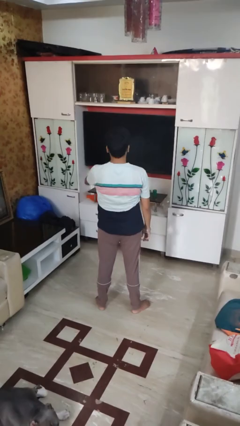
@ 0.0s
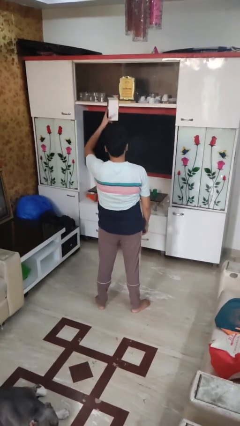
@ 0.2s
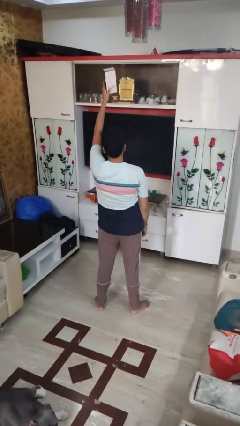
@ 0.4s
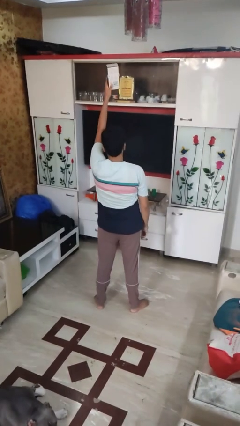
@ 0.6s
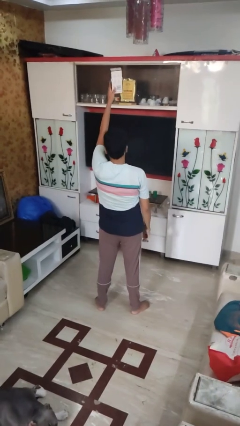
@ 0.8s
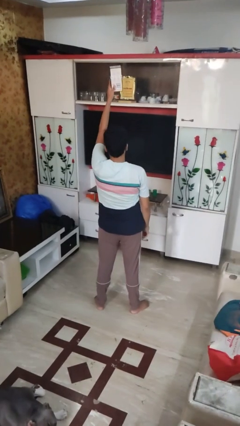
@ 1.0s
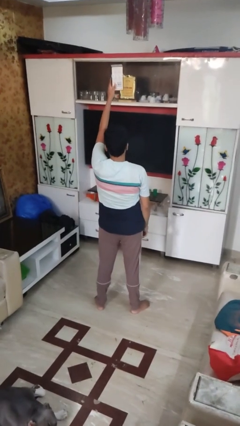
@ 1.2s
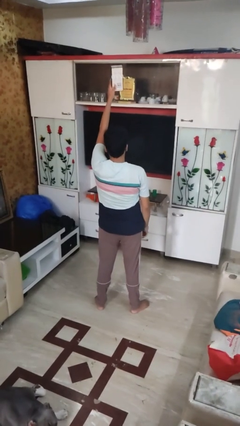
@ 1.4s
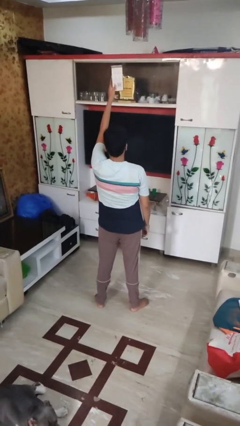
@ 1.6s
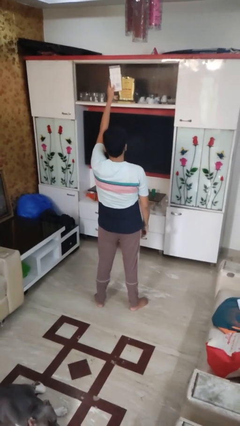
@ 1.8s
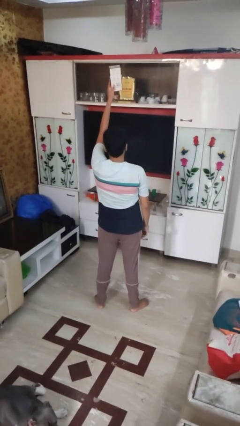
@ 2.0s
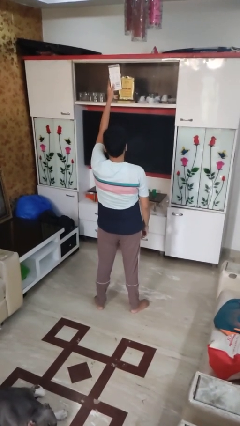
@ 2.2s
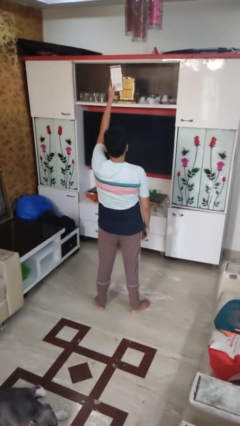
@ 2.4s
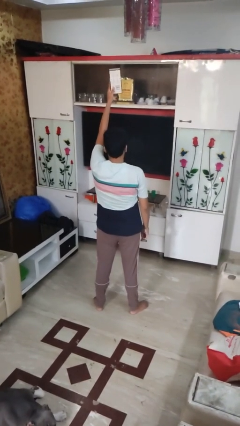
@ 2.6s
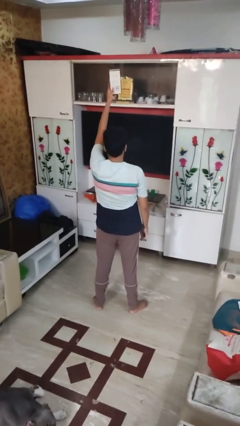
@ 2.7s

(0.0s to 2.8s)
person holds object above head

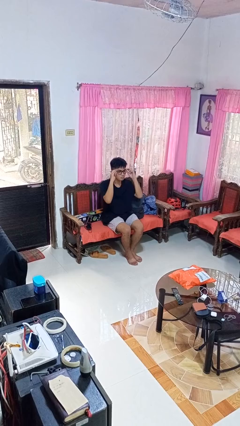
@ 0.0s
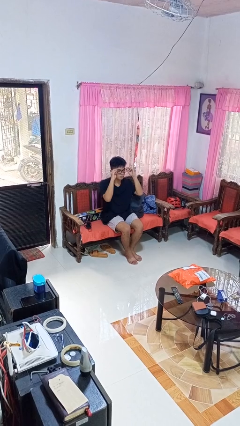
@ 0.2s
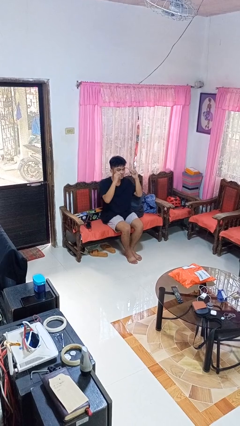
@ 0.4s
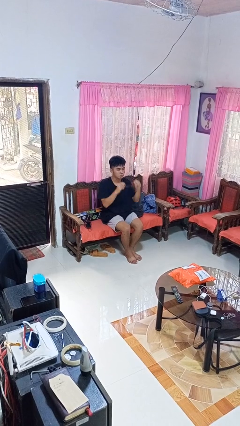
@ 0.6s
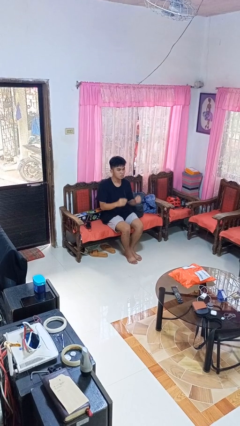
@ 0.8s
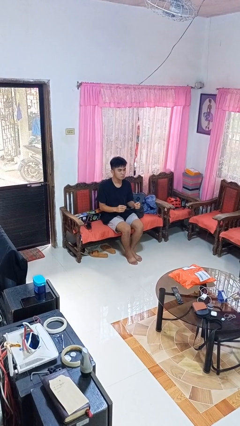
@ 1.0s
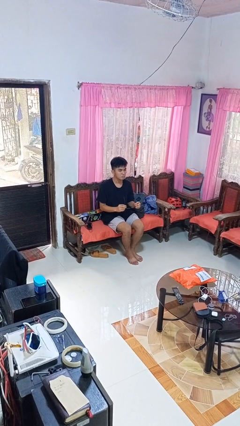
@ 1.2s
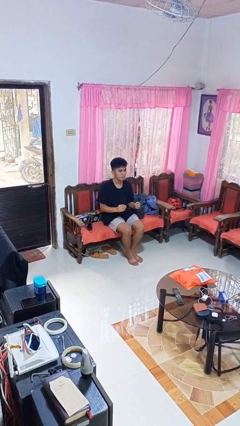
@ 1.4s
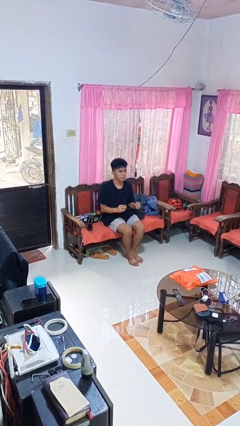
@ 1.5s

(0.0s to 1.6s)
person takes off glasses

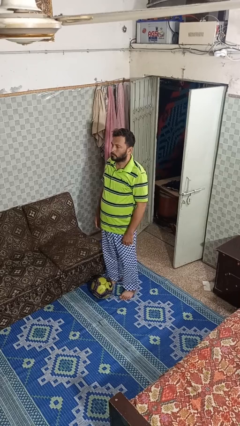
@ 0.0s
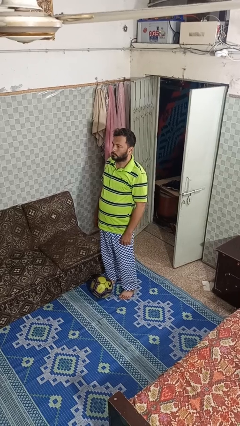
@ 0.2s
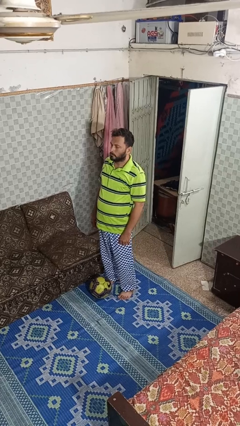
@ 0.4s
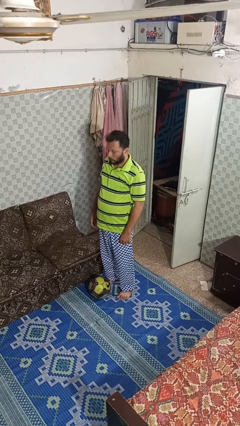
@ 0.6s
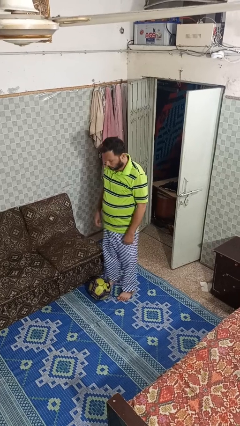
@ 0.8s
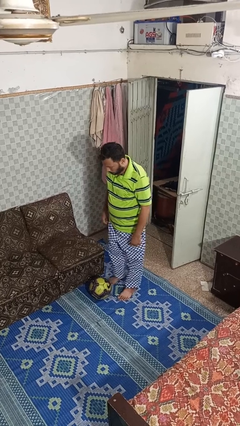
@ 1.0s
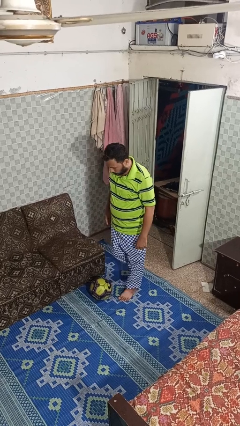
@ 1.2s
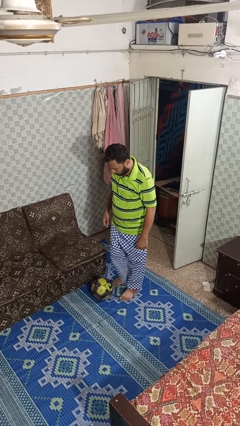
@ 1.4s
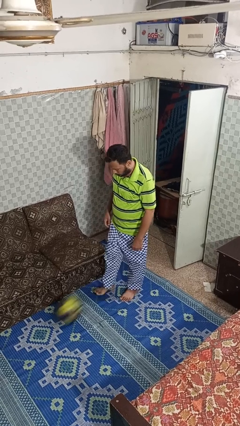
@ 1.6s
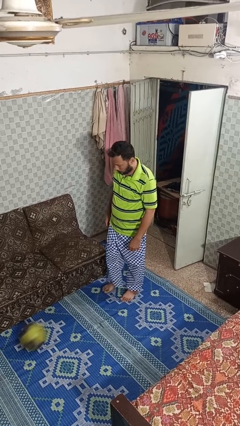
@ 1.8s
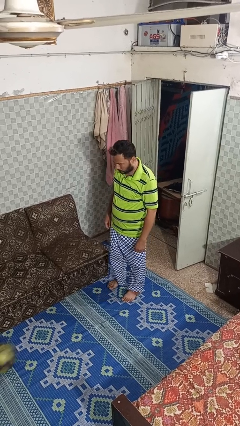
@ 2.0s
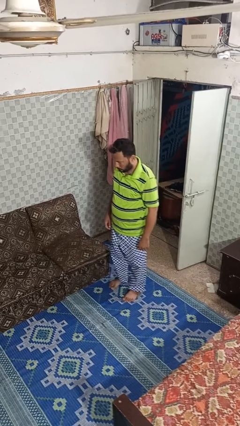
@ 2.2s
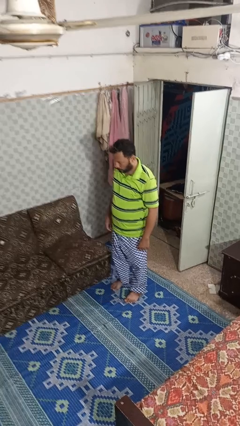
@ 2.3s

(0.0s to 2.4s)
person kicks object to person

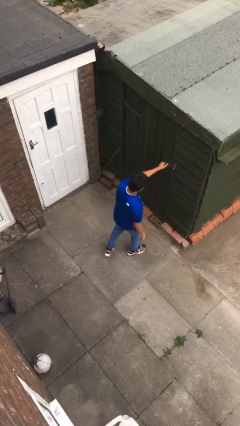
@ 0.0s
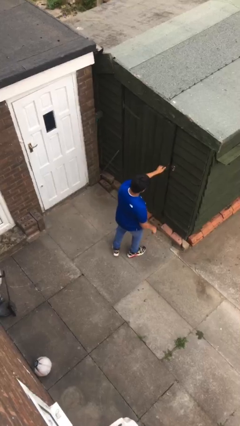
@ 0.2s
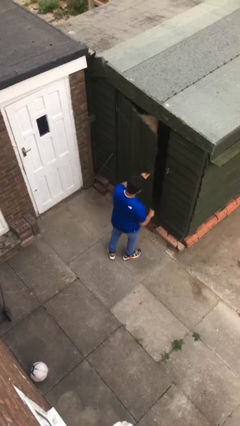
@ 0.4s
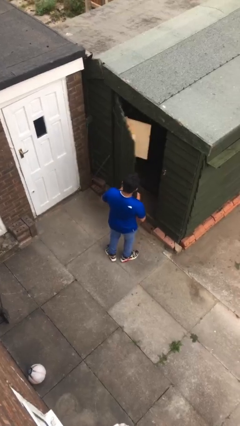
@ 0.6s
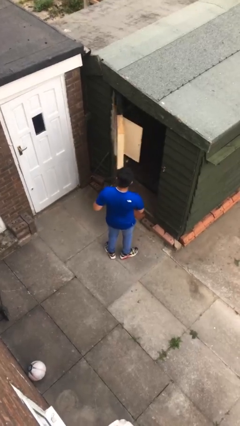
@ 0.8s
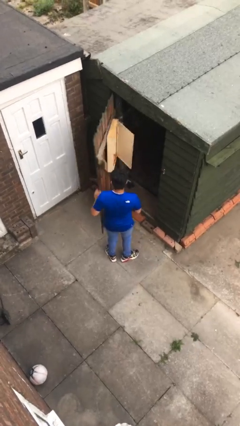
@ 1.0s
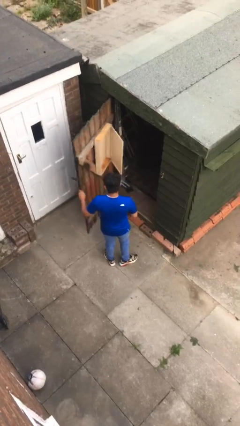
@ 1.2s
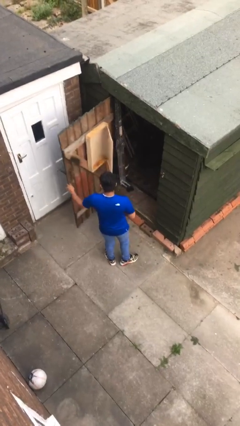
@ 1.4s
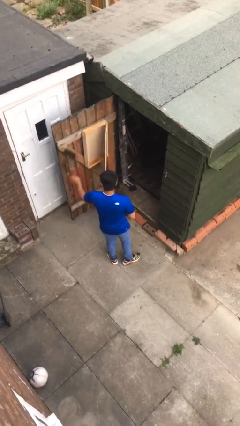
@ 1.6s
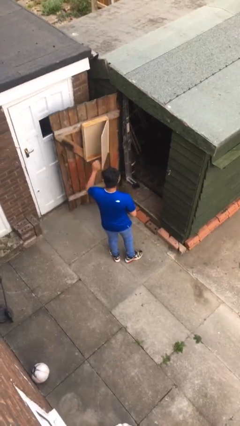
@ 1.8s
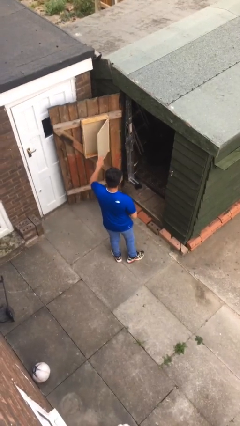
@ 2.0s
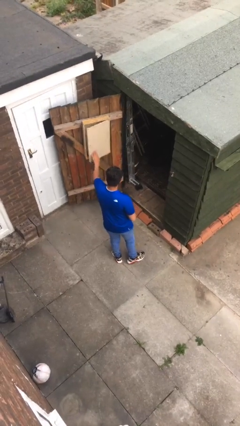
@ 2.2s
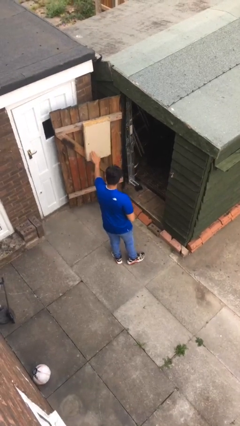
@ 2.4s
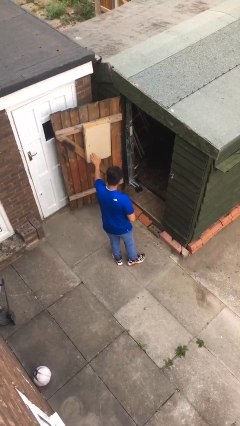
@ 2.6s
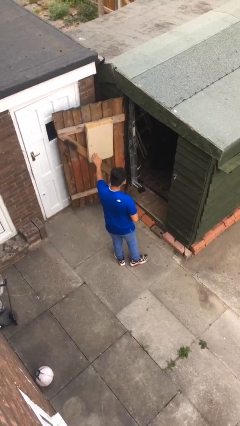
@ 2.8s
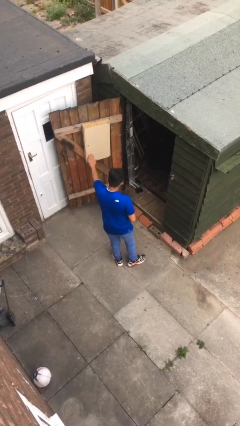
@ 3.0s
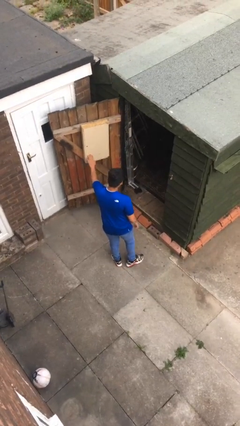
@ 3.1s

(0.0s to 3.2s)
person opens facility door

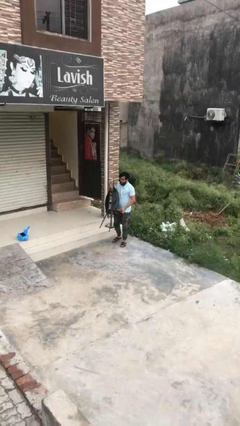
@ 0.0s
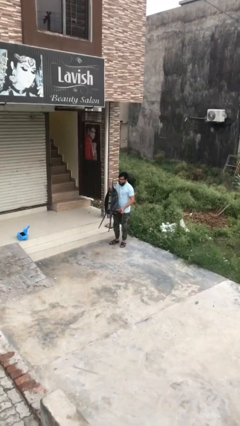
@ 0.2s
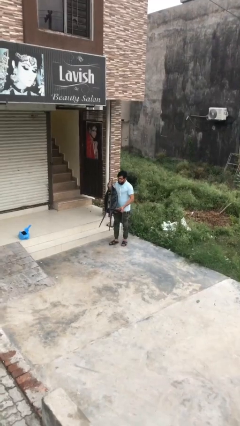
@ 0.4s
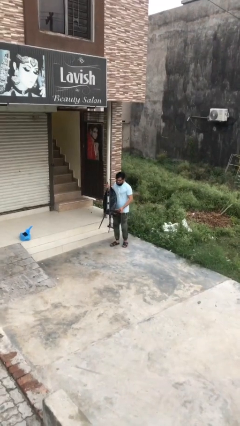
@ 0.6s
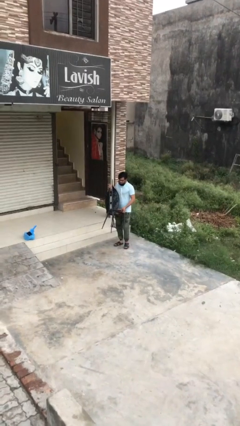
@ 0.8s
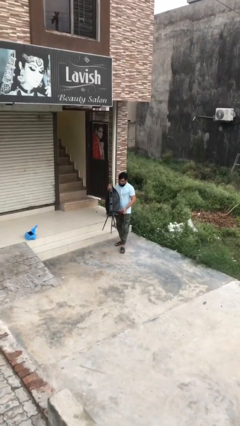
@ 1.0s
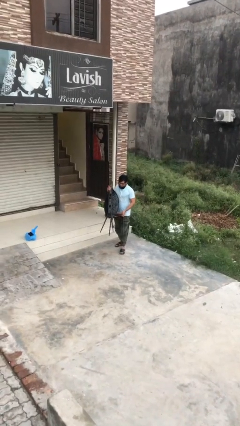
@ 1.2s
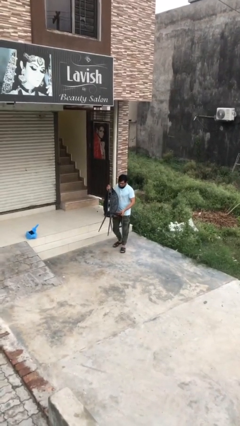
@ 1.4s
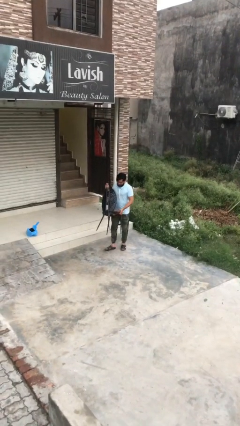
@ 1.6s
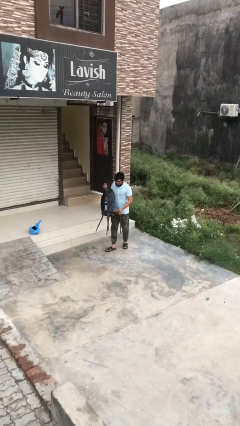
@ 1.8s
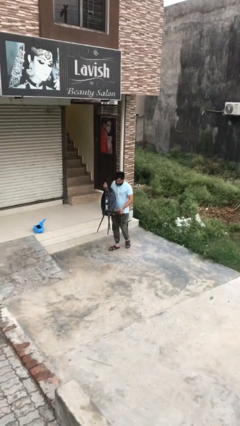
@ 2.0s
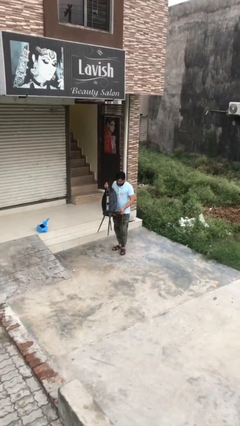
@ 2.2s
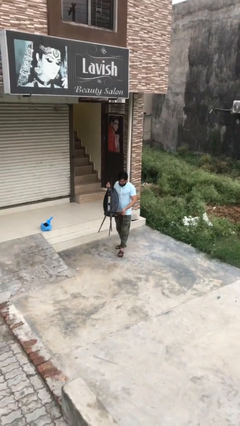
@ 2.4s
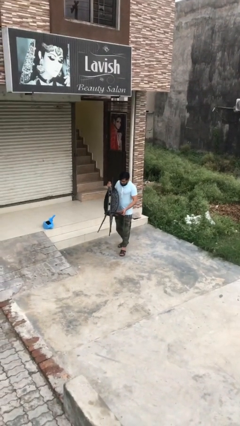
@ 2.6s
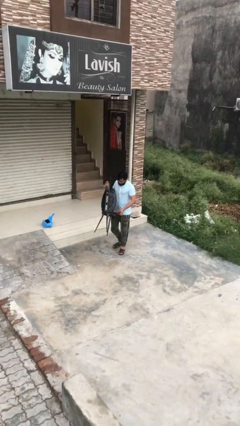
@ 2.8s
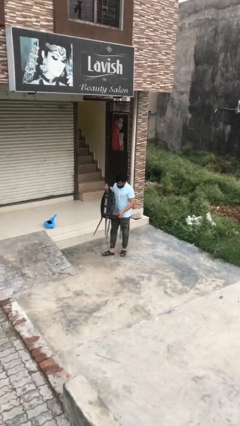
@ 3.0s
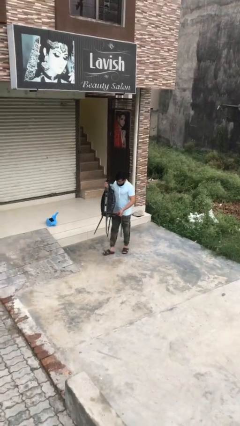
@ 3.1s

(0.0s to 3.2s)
person carries heavy object

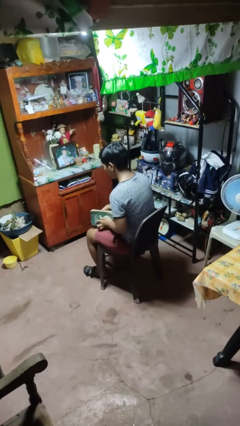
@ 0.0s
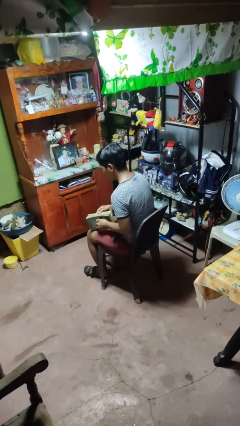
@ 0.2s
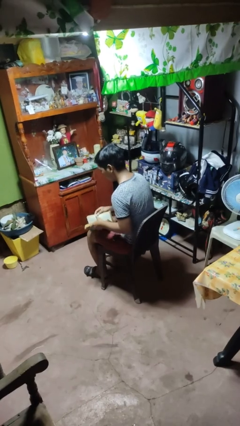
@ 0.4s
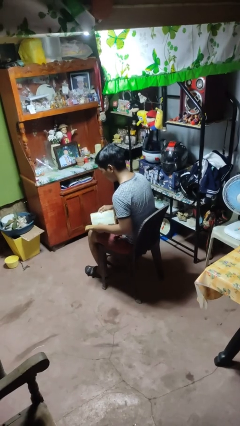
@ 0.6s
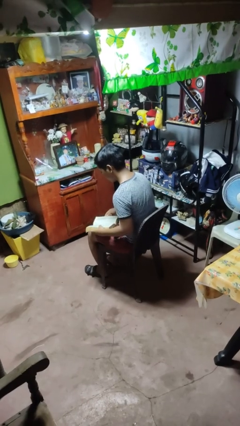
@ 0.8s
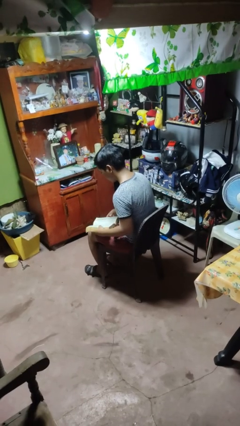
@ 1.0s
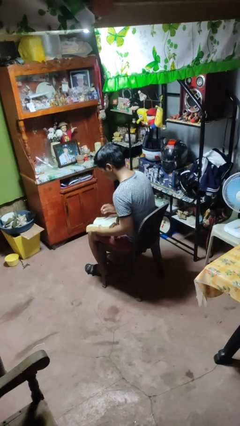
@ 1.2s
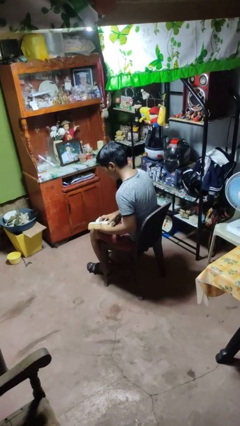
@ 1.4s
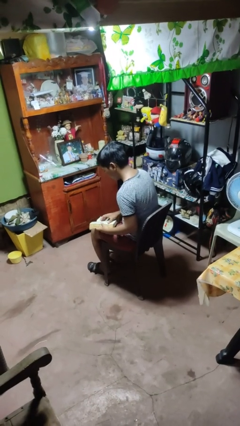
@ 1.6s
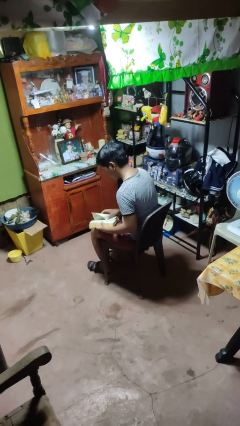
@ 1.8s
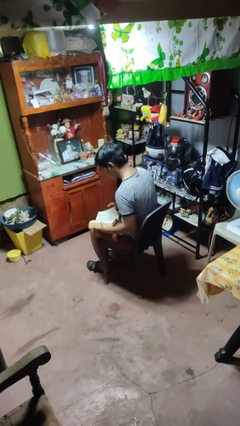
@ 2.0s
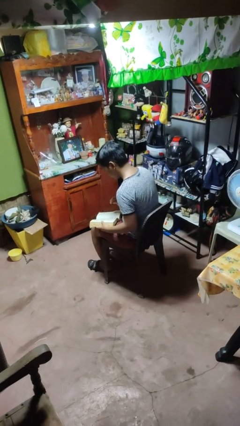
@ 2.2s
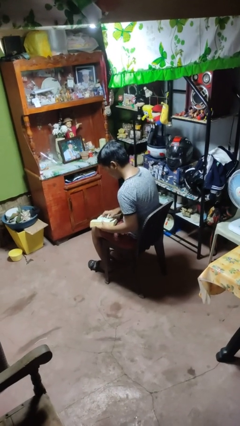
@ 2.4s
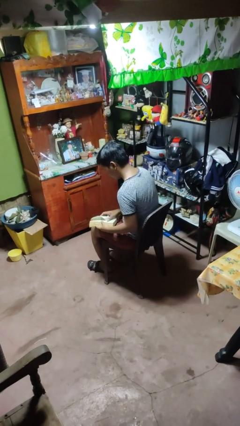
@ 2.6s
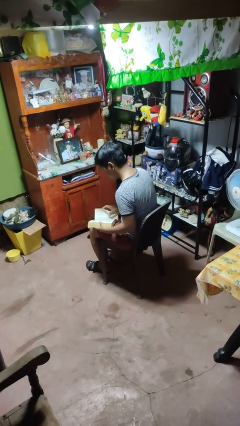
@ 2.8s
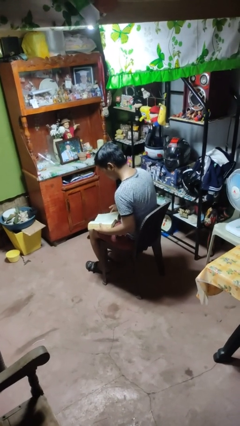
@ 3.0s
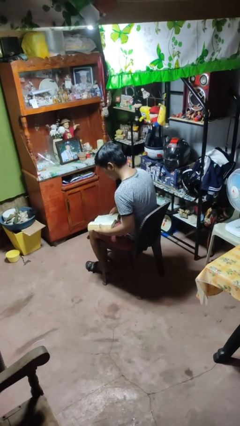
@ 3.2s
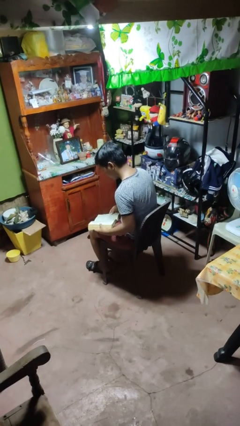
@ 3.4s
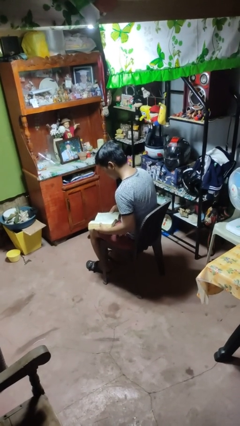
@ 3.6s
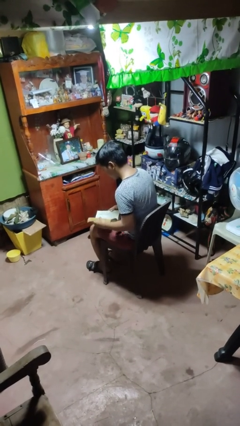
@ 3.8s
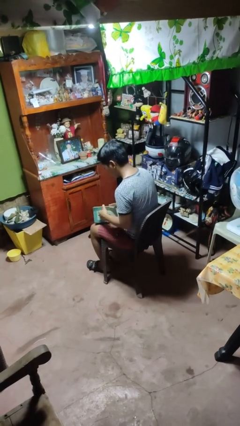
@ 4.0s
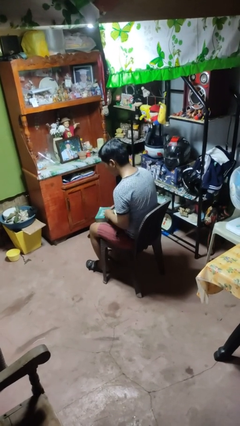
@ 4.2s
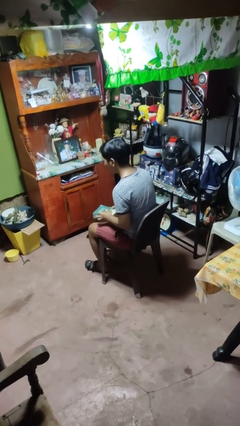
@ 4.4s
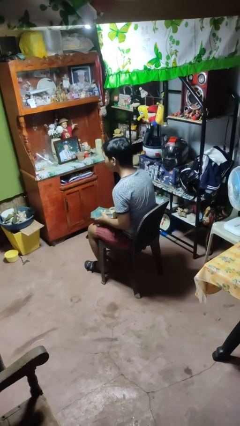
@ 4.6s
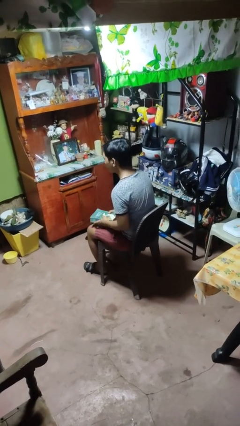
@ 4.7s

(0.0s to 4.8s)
person reads book
